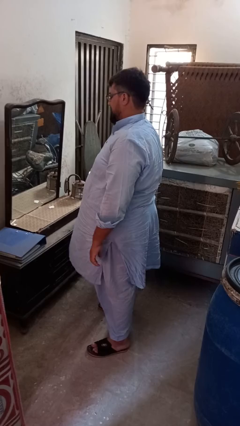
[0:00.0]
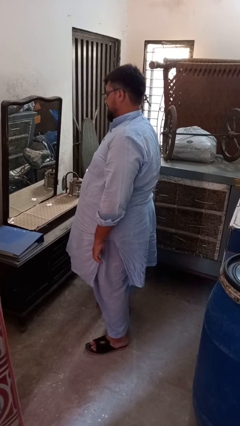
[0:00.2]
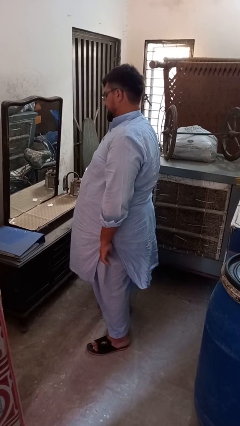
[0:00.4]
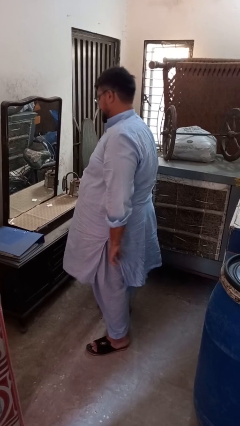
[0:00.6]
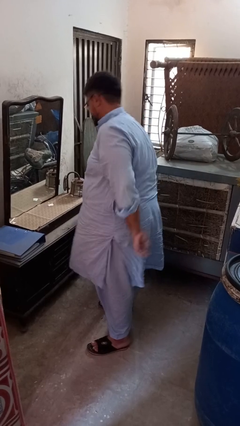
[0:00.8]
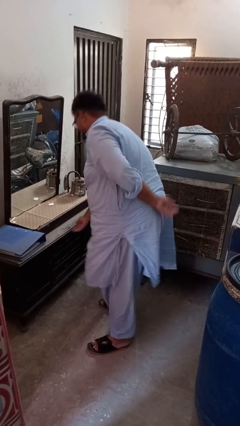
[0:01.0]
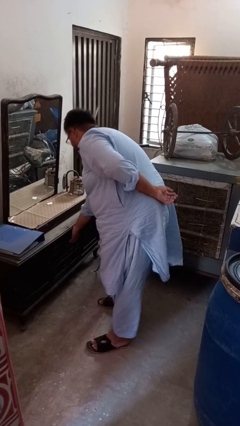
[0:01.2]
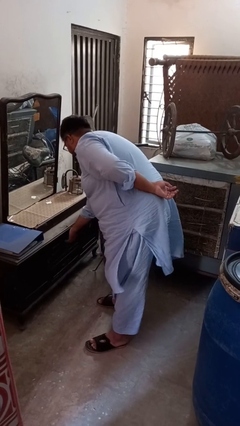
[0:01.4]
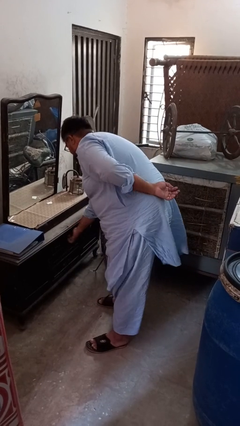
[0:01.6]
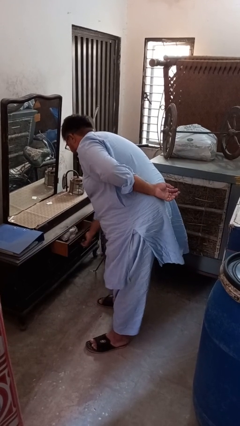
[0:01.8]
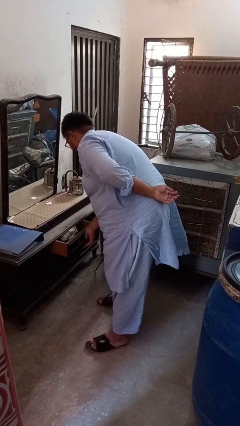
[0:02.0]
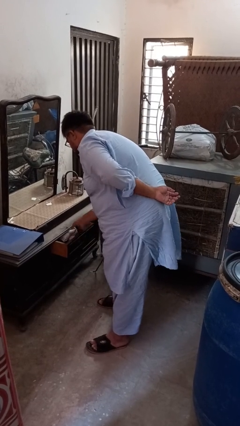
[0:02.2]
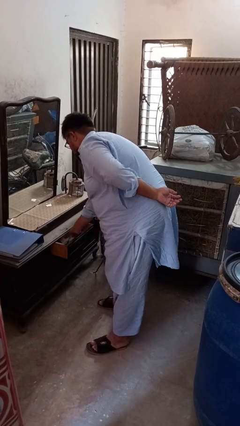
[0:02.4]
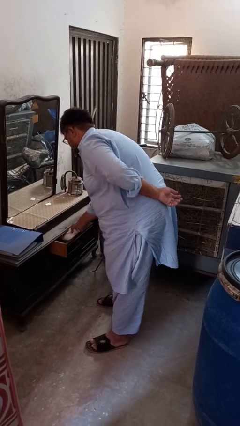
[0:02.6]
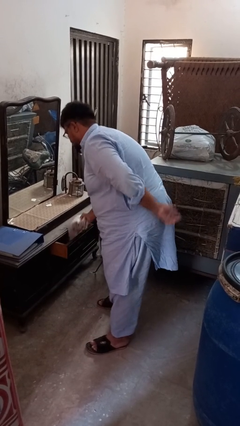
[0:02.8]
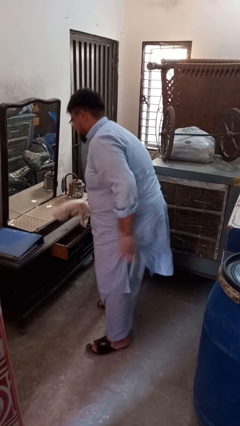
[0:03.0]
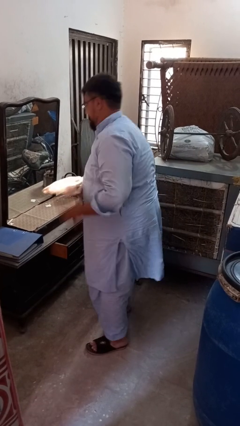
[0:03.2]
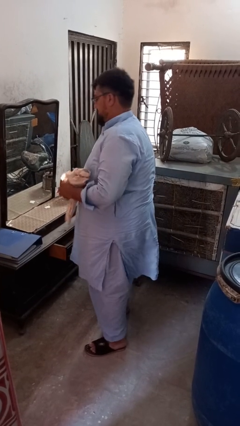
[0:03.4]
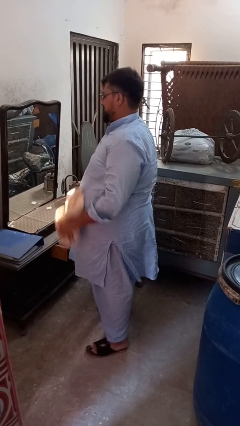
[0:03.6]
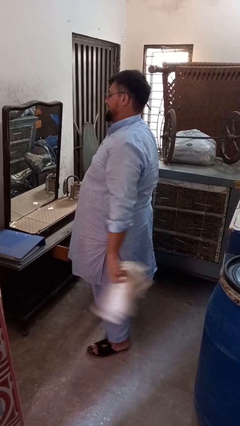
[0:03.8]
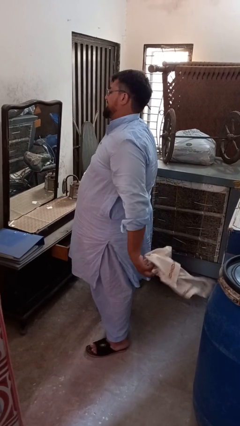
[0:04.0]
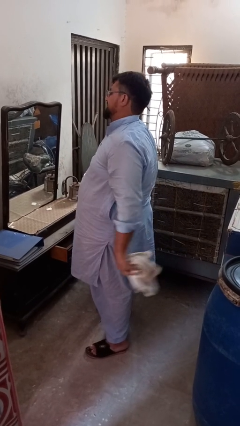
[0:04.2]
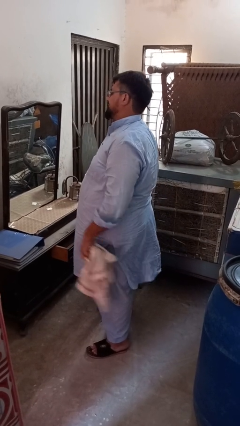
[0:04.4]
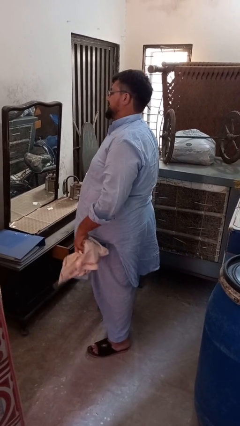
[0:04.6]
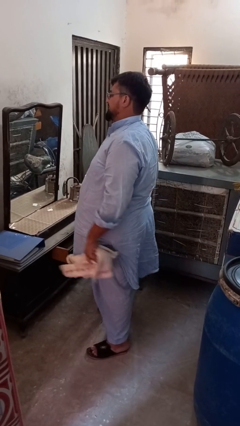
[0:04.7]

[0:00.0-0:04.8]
person takes clothes from dresser

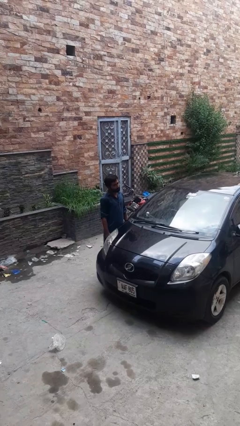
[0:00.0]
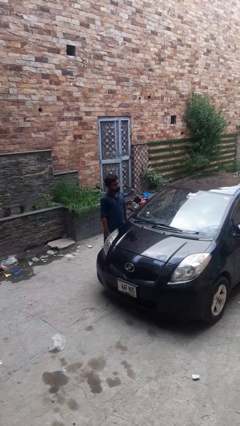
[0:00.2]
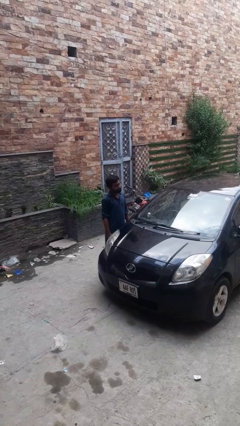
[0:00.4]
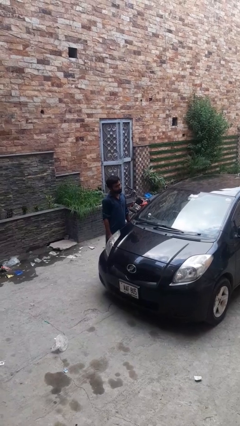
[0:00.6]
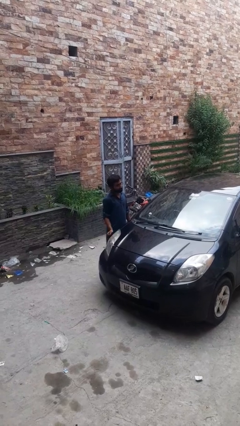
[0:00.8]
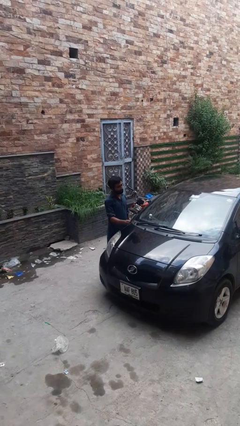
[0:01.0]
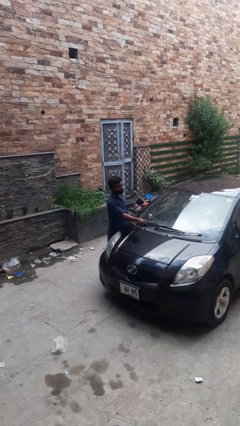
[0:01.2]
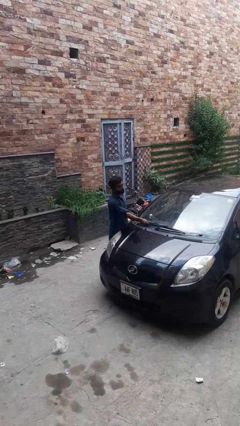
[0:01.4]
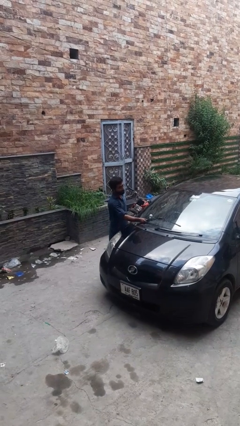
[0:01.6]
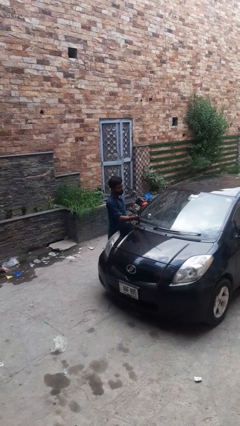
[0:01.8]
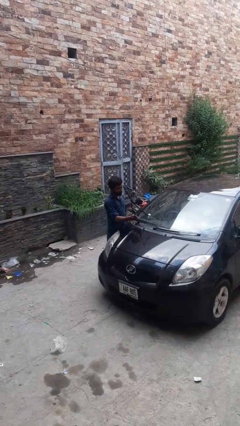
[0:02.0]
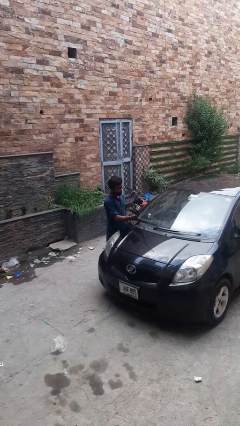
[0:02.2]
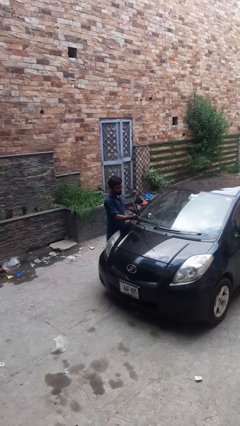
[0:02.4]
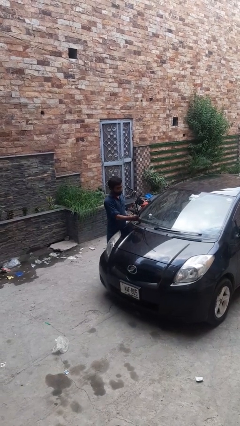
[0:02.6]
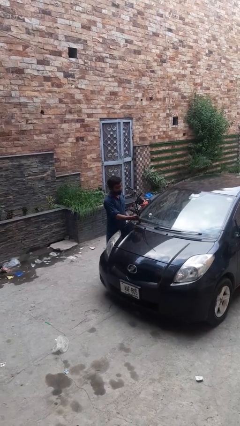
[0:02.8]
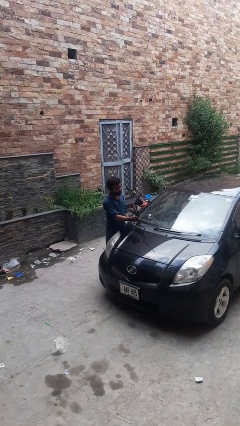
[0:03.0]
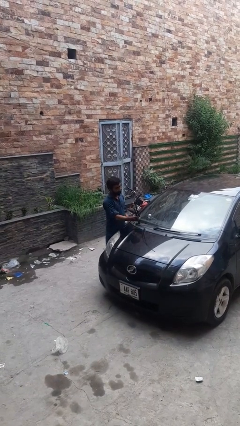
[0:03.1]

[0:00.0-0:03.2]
person flips up car wipers

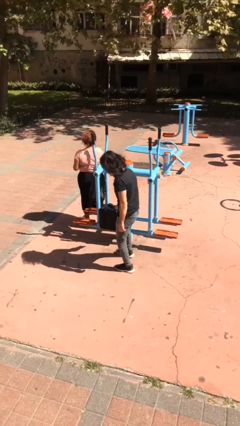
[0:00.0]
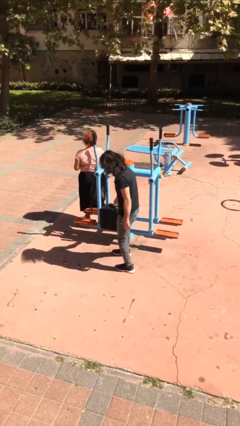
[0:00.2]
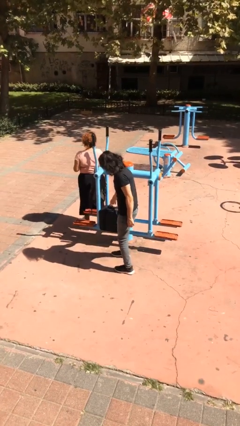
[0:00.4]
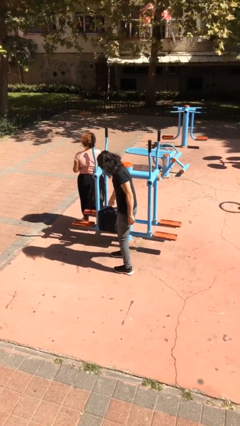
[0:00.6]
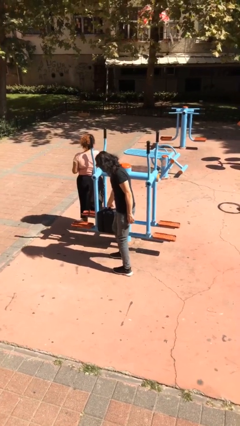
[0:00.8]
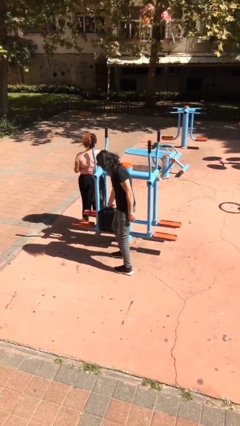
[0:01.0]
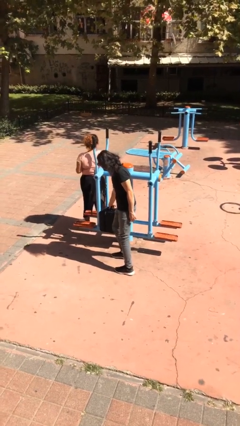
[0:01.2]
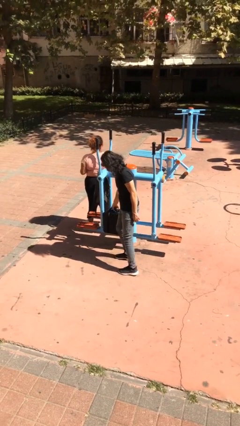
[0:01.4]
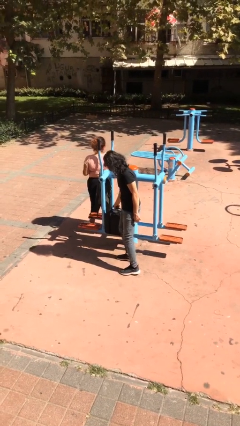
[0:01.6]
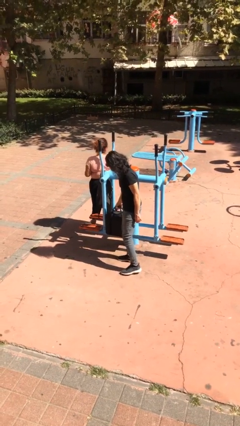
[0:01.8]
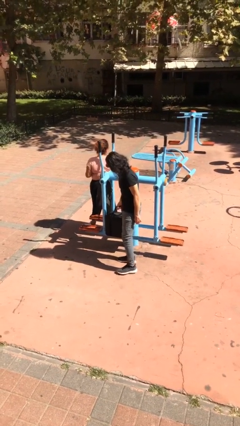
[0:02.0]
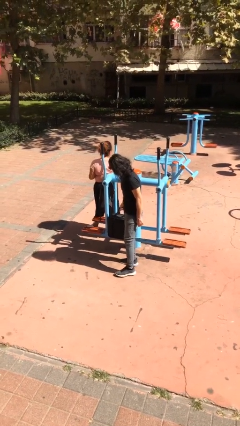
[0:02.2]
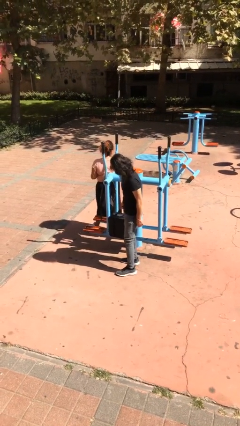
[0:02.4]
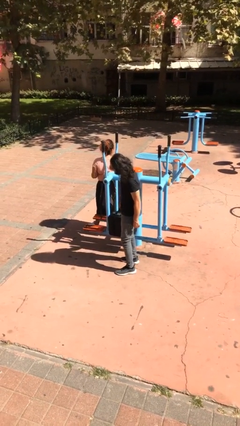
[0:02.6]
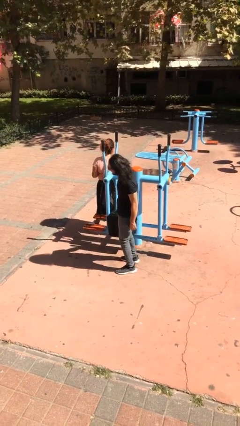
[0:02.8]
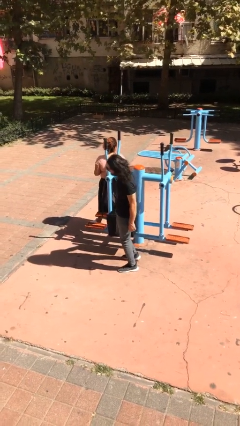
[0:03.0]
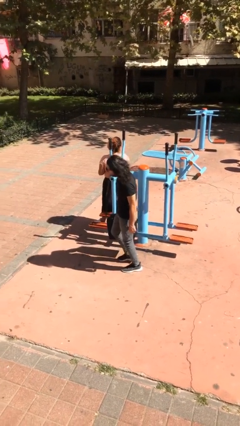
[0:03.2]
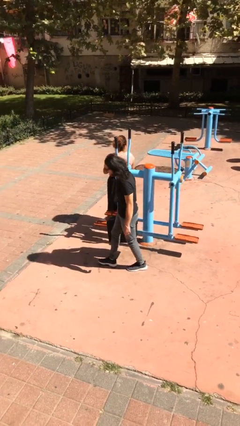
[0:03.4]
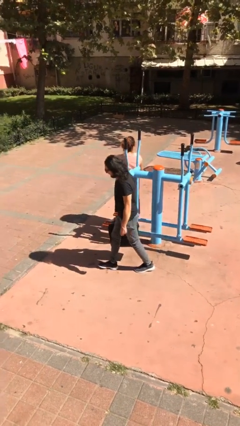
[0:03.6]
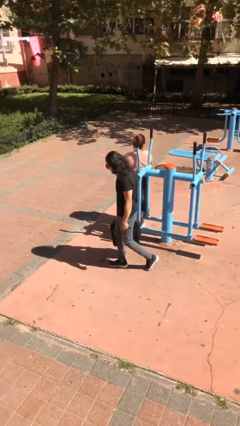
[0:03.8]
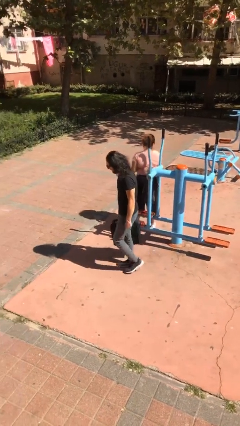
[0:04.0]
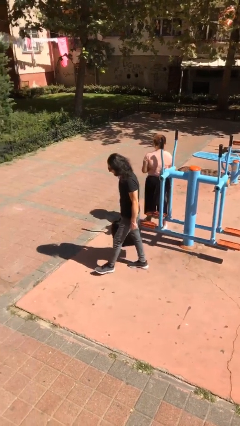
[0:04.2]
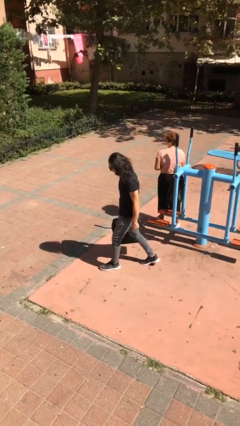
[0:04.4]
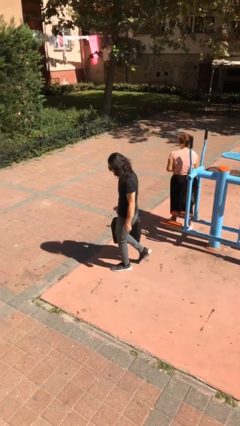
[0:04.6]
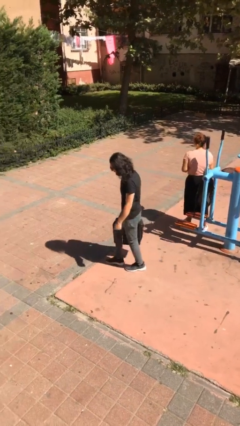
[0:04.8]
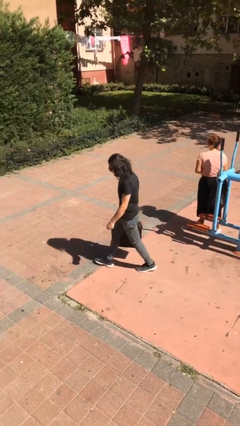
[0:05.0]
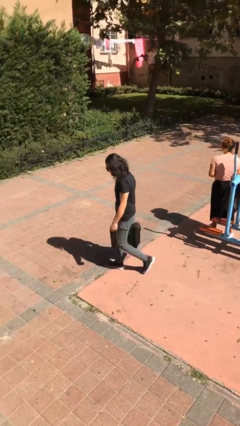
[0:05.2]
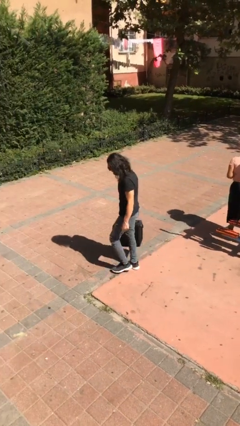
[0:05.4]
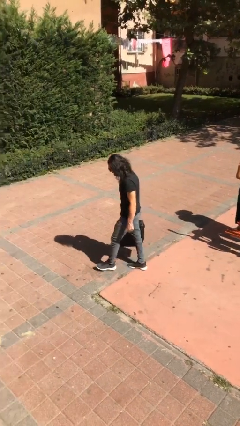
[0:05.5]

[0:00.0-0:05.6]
person steals object from person

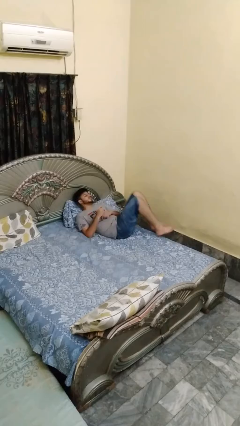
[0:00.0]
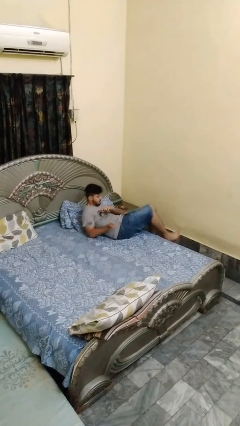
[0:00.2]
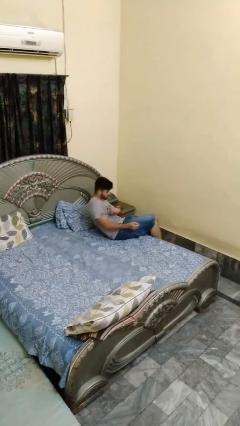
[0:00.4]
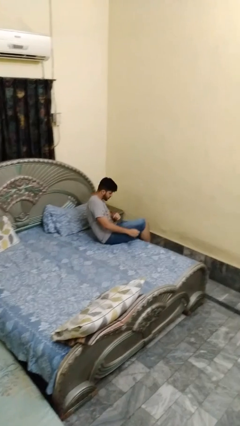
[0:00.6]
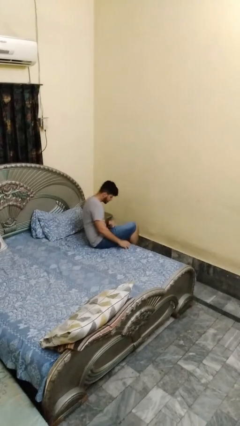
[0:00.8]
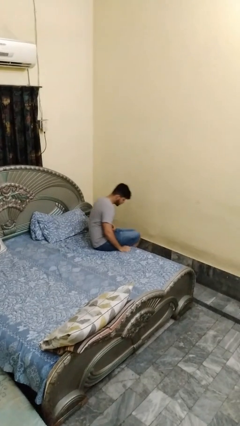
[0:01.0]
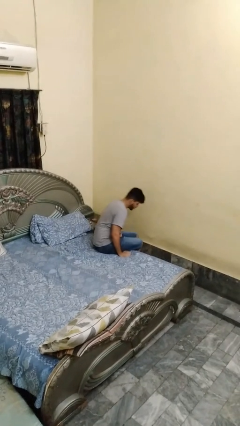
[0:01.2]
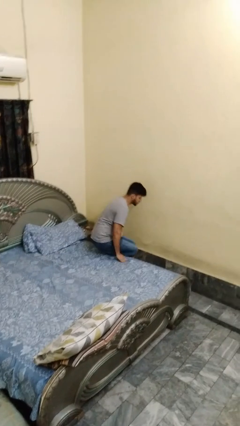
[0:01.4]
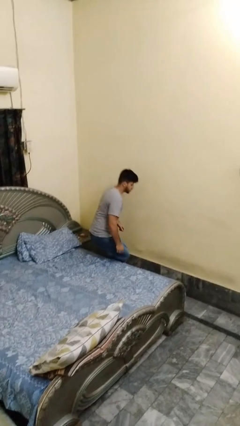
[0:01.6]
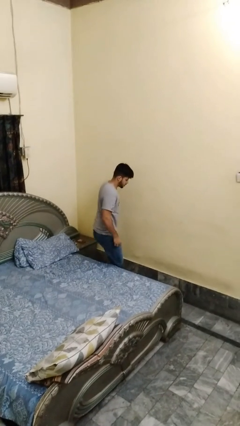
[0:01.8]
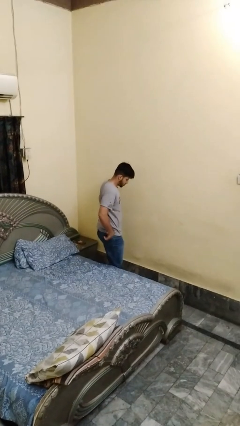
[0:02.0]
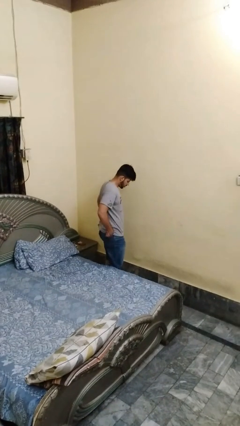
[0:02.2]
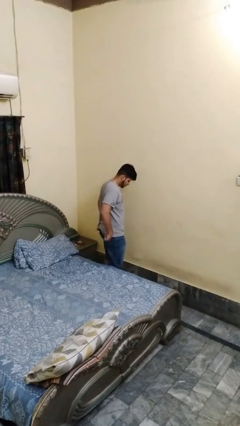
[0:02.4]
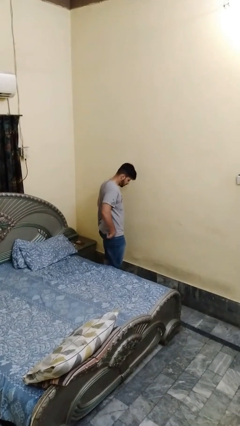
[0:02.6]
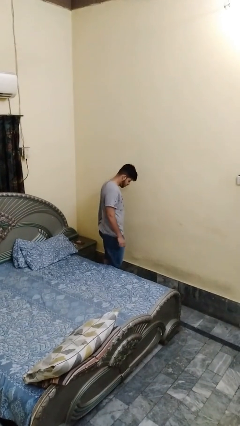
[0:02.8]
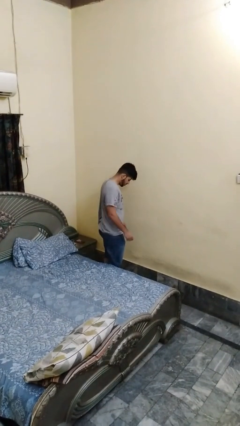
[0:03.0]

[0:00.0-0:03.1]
person stands up

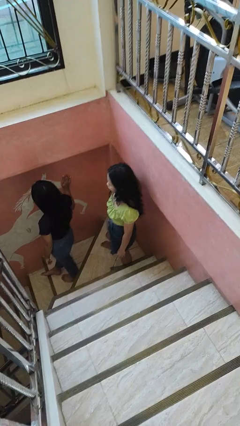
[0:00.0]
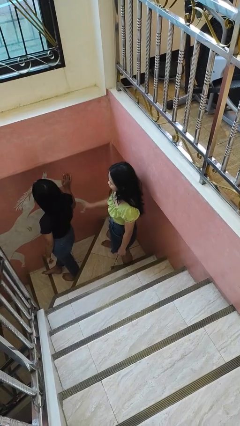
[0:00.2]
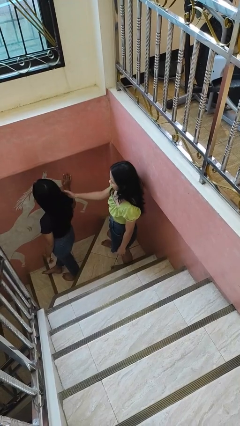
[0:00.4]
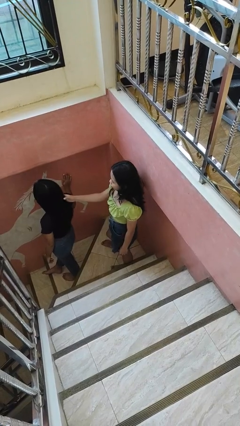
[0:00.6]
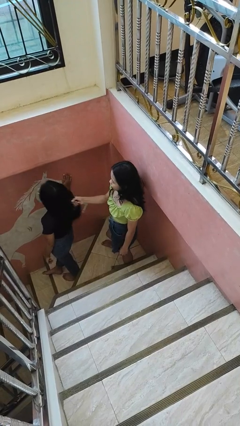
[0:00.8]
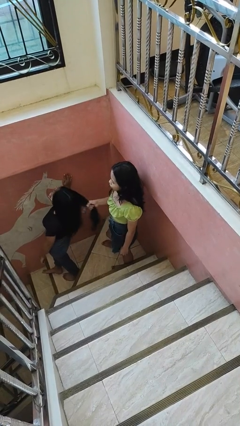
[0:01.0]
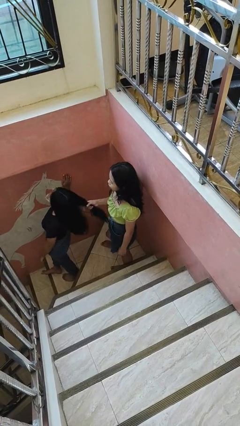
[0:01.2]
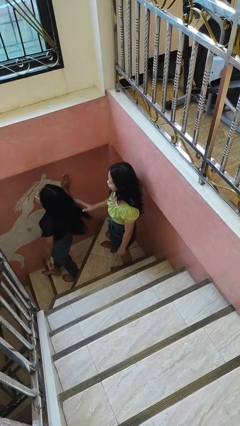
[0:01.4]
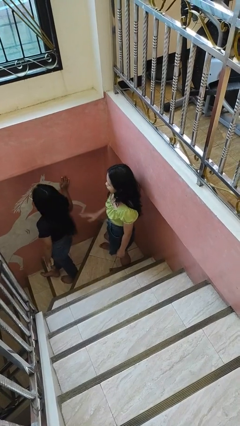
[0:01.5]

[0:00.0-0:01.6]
person grabs person by hair
